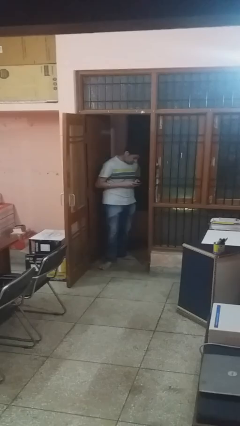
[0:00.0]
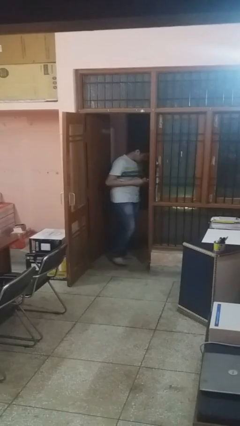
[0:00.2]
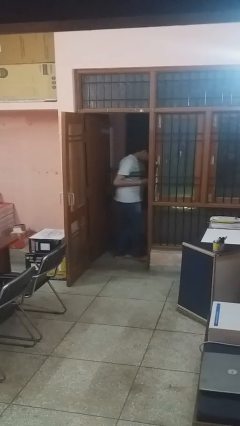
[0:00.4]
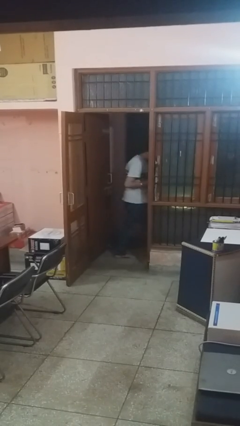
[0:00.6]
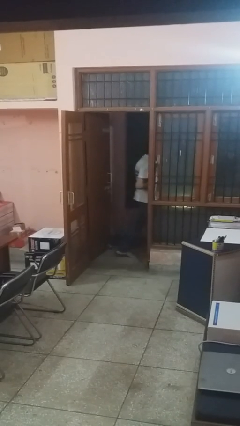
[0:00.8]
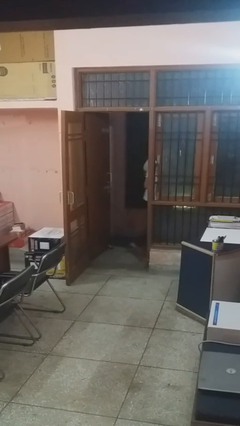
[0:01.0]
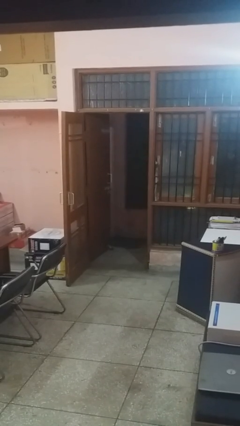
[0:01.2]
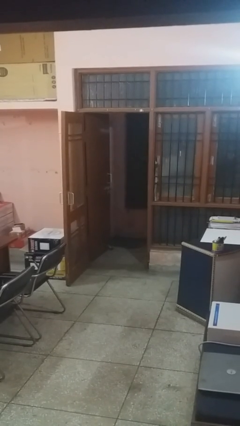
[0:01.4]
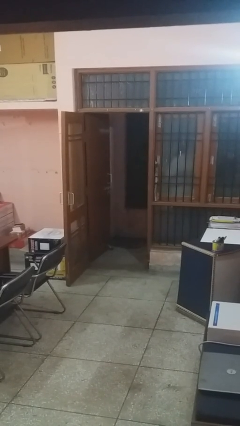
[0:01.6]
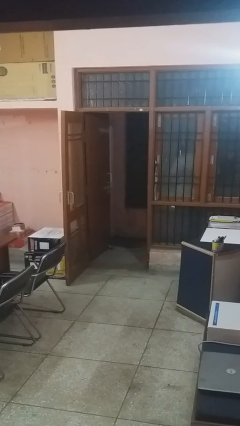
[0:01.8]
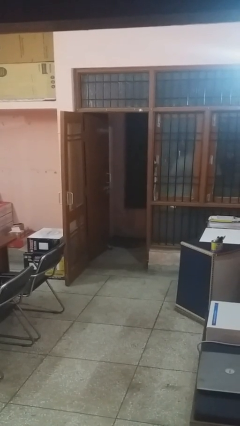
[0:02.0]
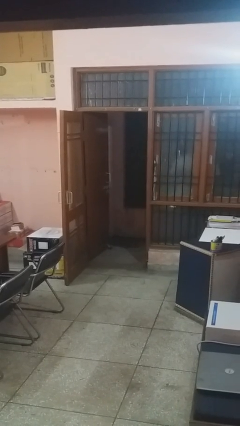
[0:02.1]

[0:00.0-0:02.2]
person exits scene through structure

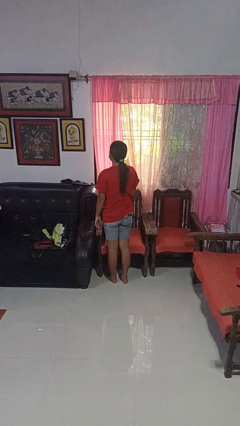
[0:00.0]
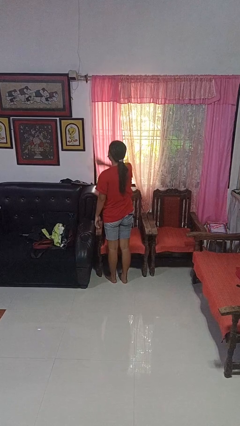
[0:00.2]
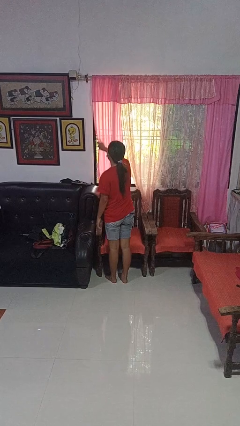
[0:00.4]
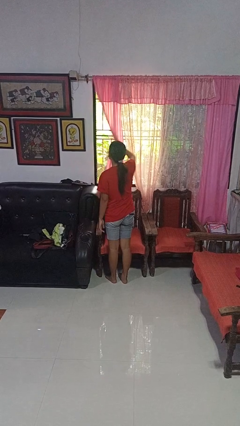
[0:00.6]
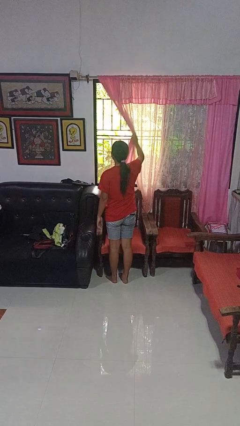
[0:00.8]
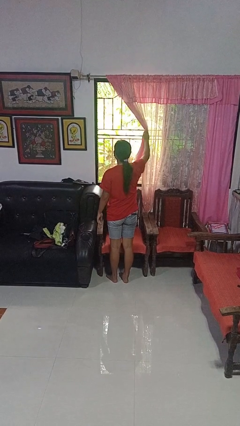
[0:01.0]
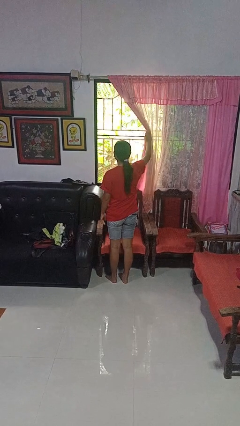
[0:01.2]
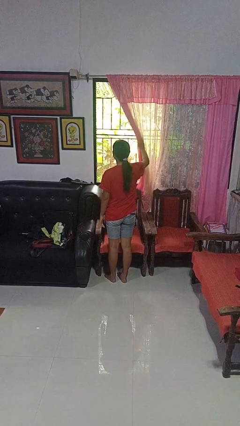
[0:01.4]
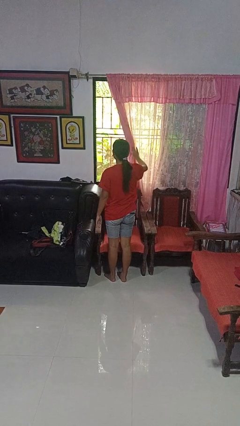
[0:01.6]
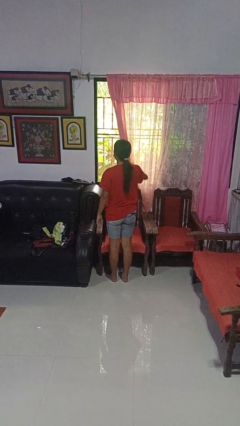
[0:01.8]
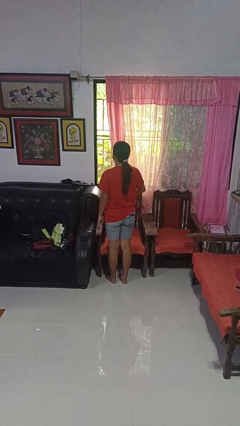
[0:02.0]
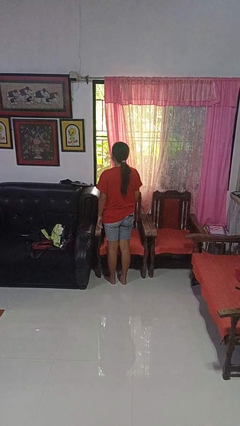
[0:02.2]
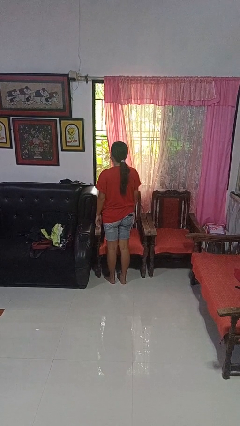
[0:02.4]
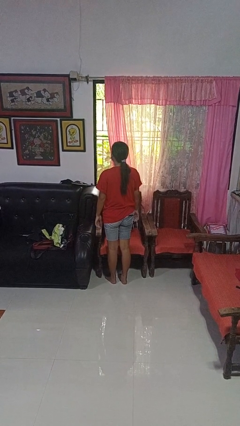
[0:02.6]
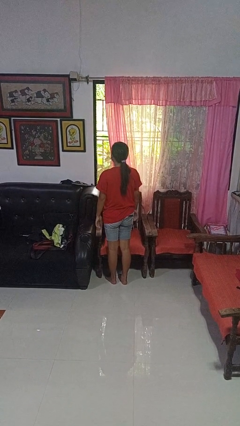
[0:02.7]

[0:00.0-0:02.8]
person opens curtains

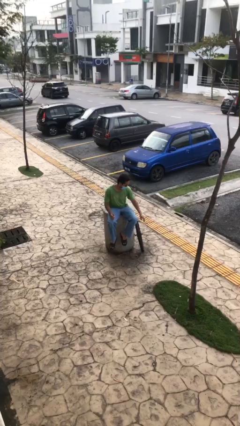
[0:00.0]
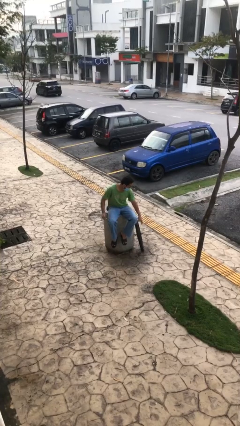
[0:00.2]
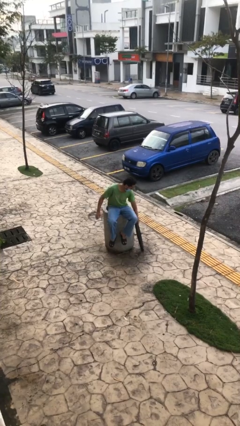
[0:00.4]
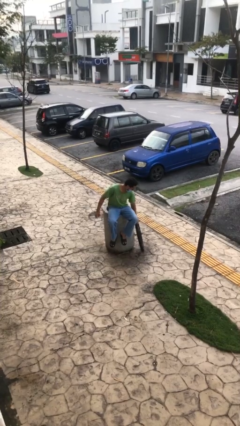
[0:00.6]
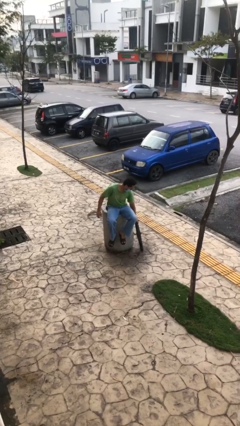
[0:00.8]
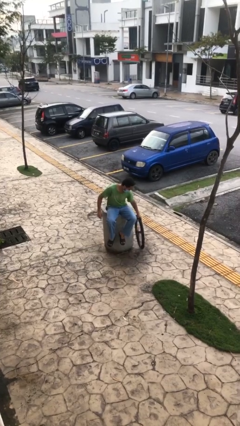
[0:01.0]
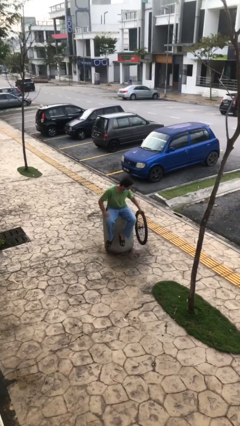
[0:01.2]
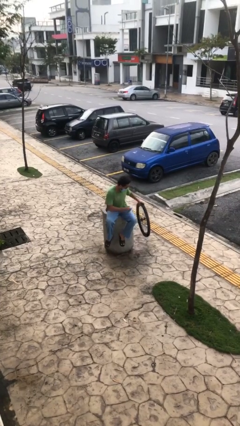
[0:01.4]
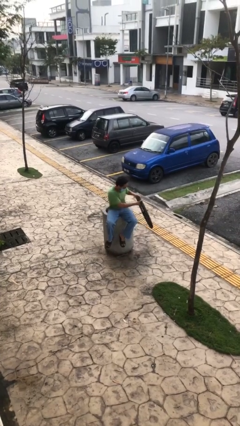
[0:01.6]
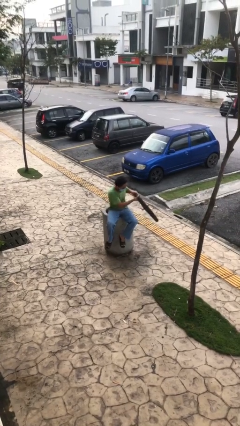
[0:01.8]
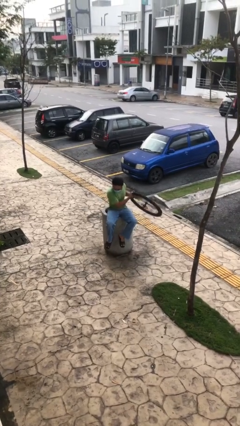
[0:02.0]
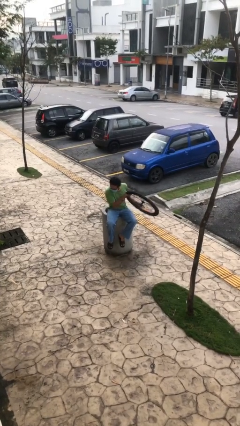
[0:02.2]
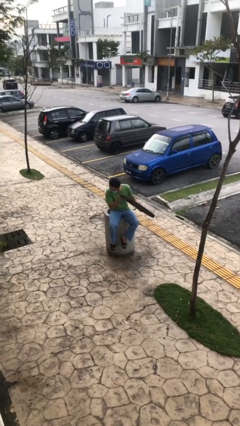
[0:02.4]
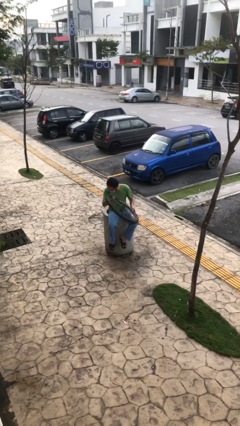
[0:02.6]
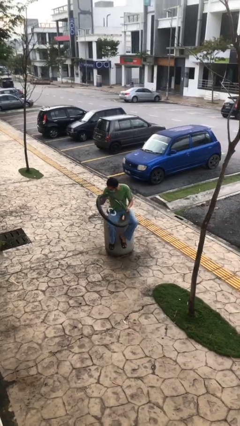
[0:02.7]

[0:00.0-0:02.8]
person picks up object from floor

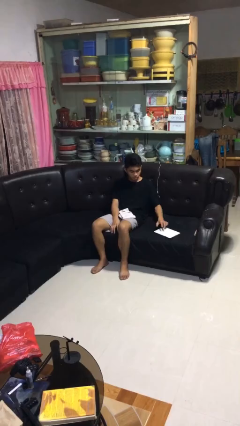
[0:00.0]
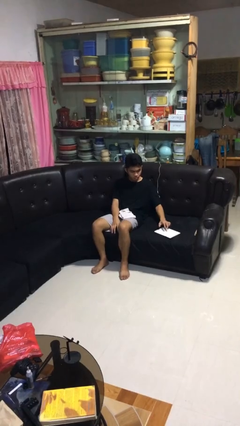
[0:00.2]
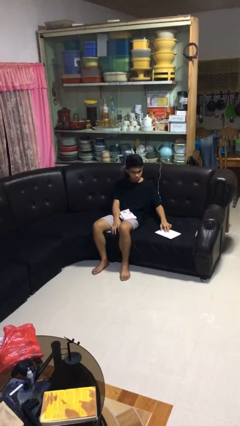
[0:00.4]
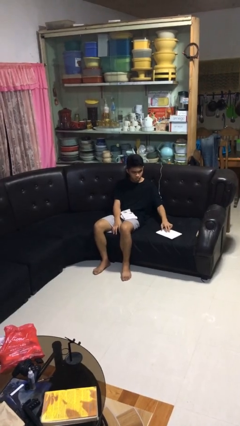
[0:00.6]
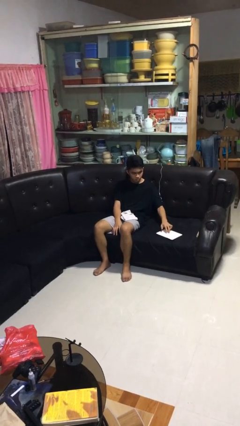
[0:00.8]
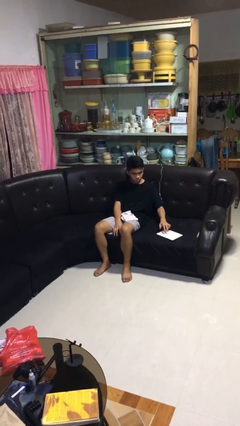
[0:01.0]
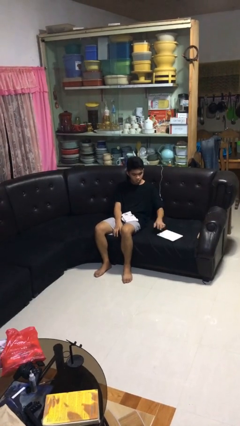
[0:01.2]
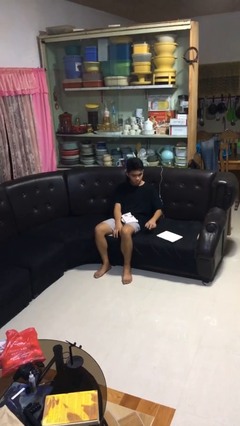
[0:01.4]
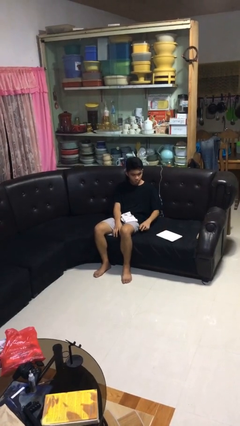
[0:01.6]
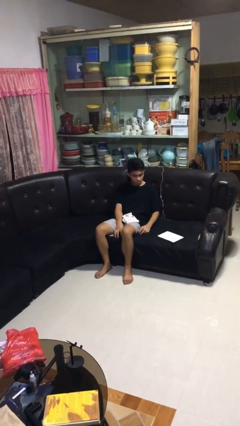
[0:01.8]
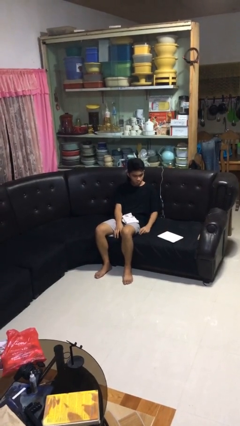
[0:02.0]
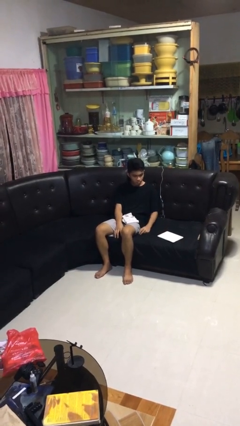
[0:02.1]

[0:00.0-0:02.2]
person taps object with finger

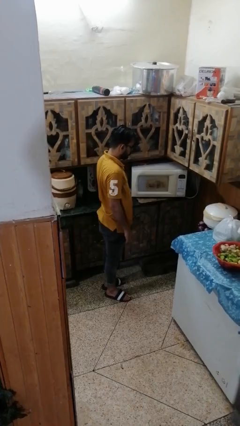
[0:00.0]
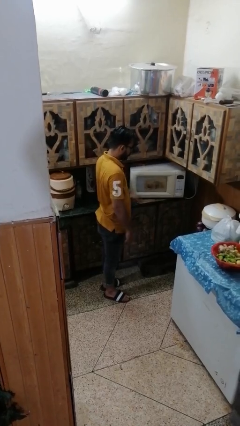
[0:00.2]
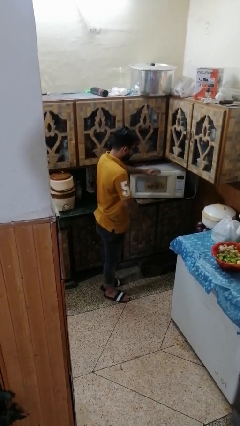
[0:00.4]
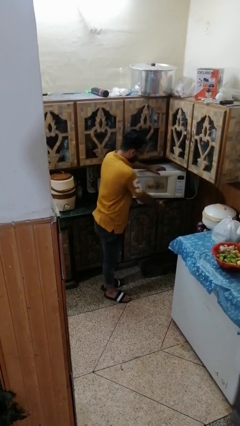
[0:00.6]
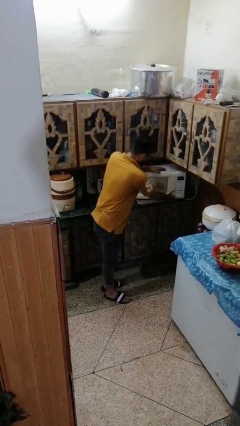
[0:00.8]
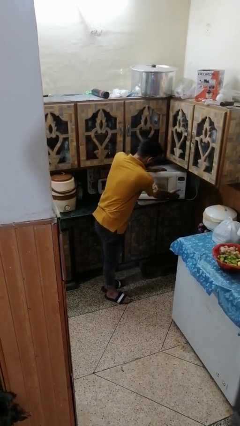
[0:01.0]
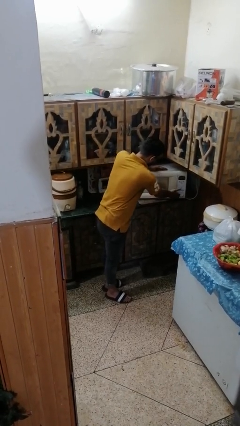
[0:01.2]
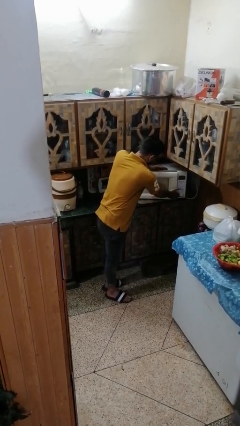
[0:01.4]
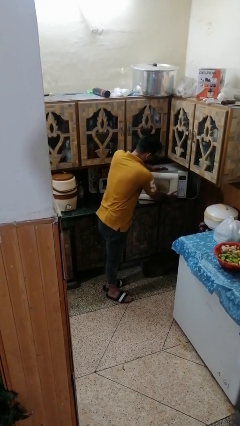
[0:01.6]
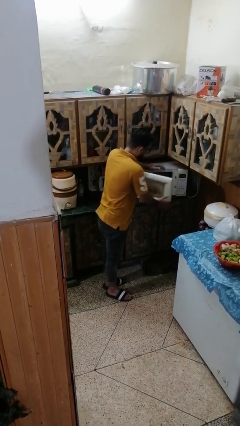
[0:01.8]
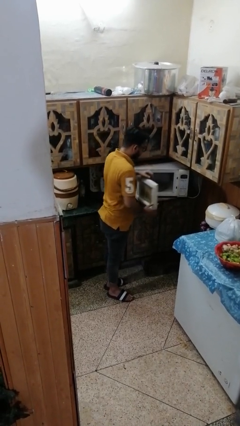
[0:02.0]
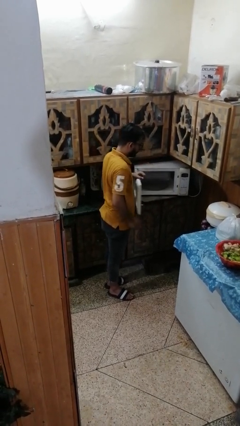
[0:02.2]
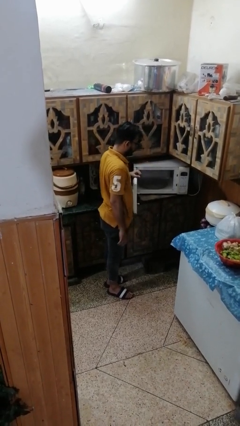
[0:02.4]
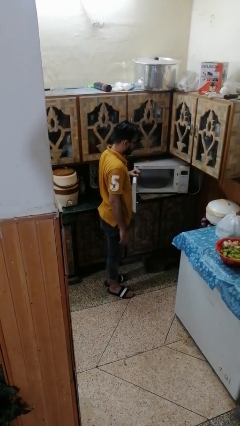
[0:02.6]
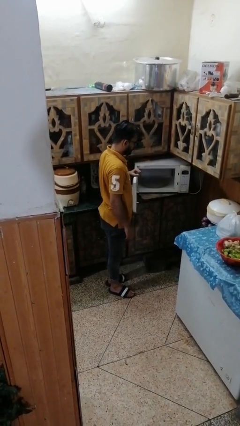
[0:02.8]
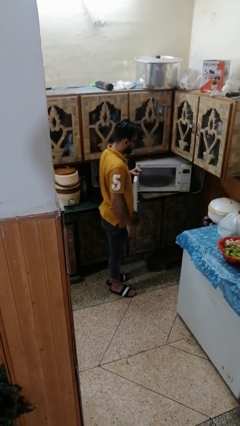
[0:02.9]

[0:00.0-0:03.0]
person opens microwave

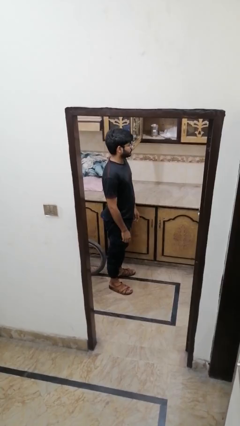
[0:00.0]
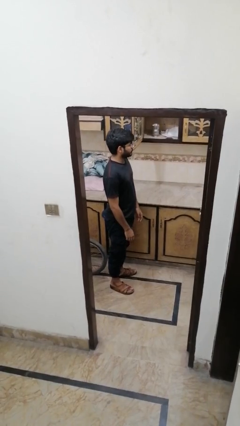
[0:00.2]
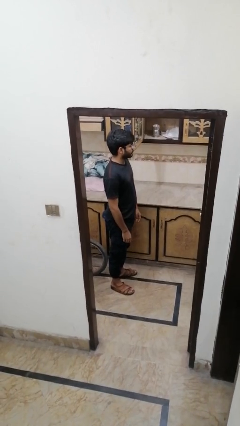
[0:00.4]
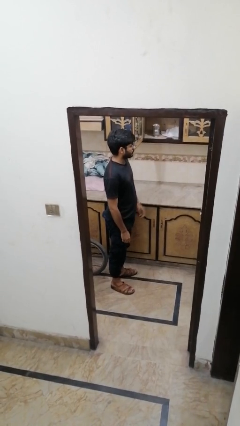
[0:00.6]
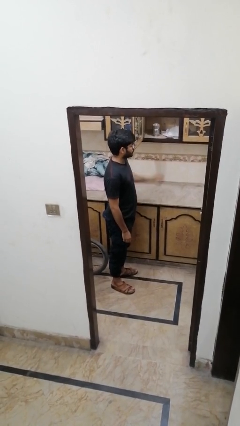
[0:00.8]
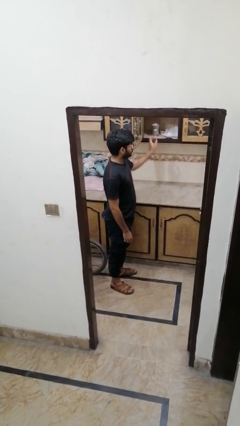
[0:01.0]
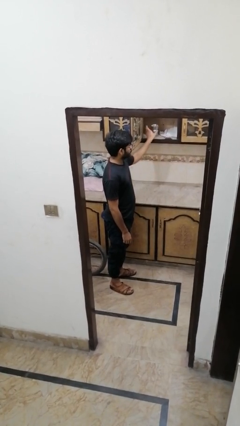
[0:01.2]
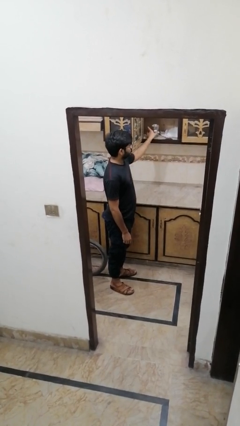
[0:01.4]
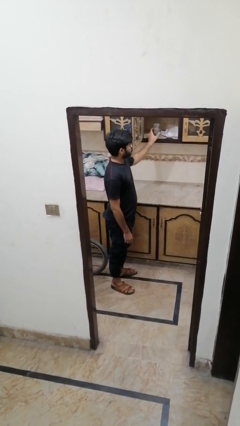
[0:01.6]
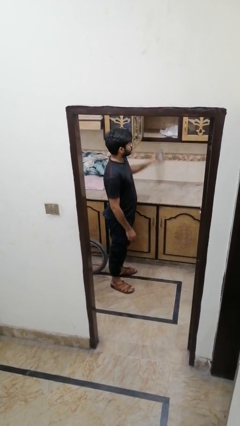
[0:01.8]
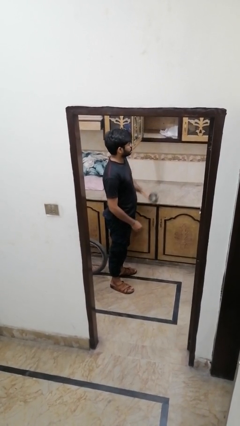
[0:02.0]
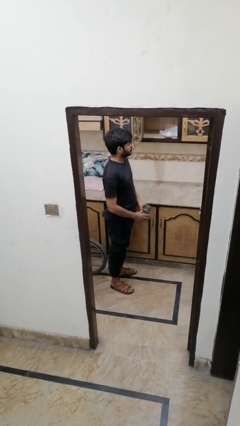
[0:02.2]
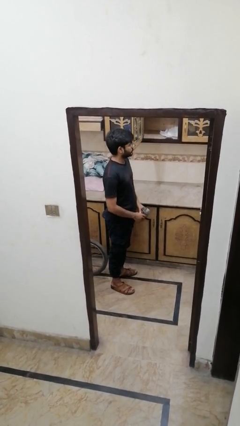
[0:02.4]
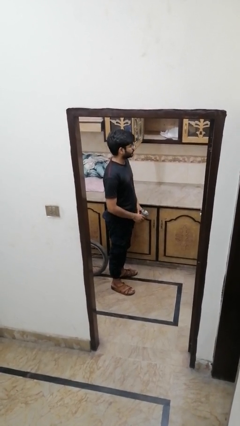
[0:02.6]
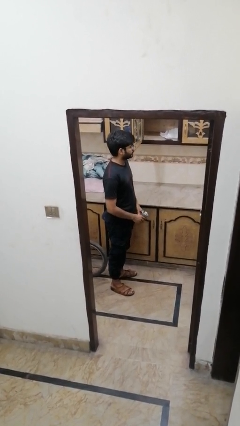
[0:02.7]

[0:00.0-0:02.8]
person picks up object from cabinet

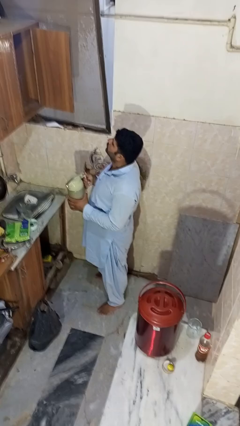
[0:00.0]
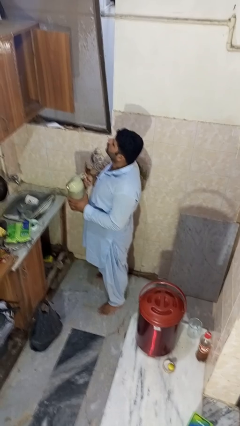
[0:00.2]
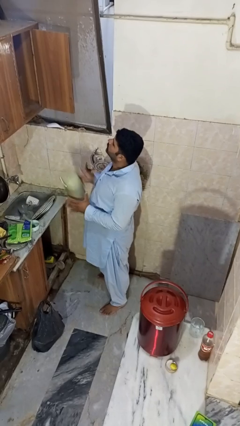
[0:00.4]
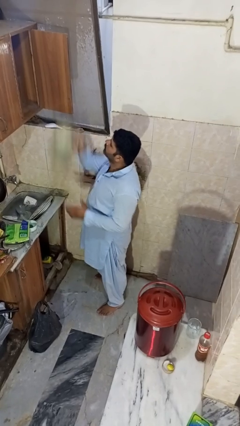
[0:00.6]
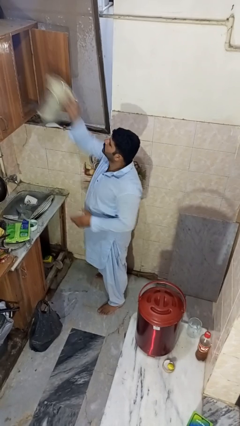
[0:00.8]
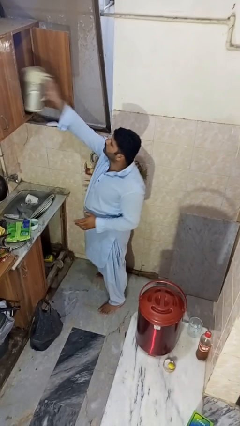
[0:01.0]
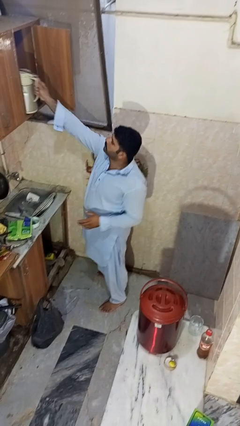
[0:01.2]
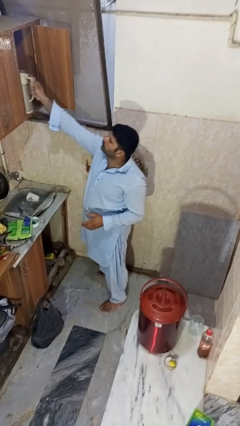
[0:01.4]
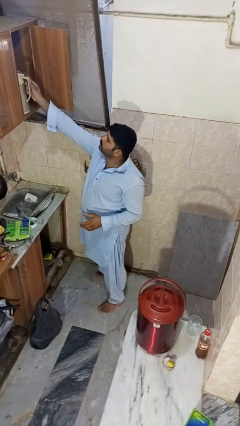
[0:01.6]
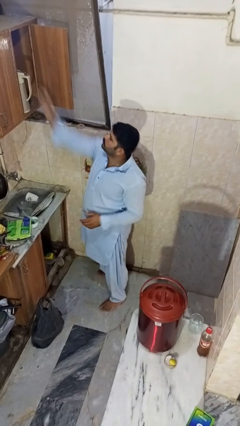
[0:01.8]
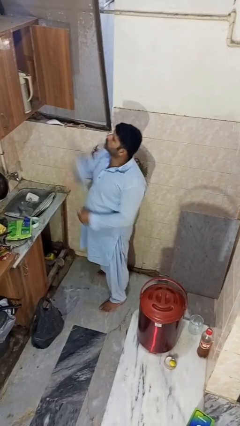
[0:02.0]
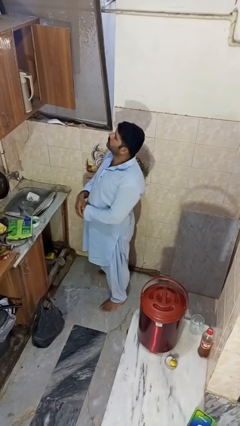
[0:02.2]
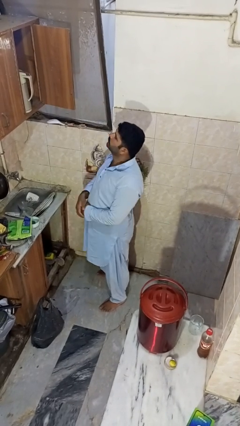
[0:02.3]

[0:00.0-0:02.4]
person puts object in cabinet
